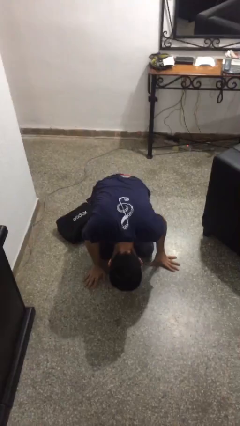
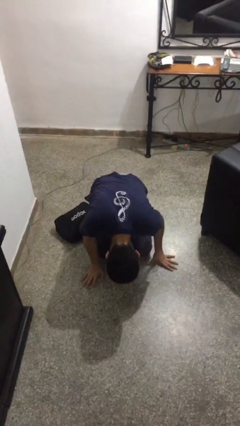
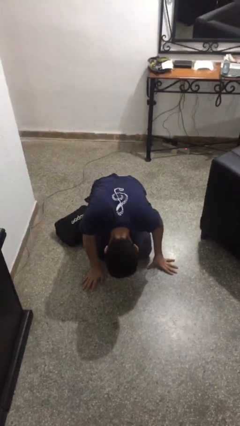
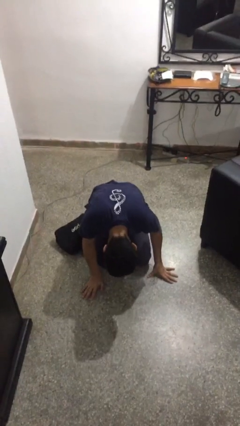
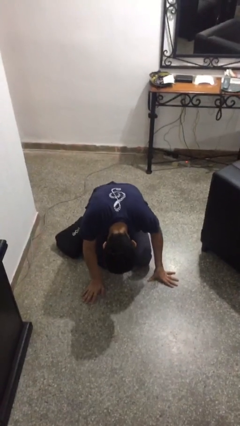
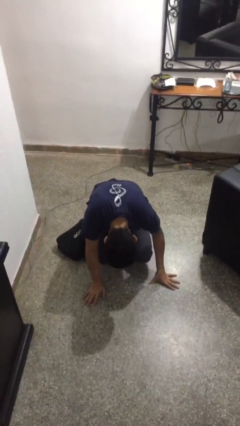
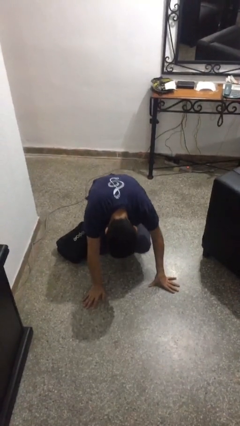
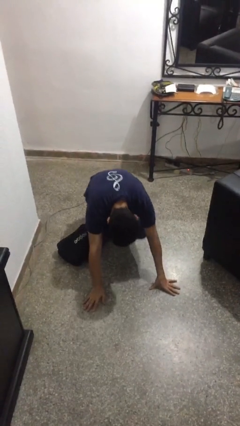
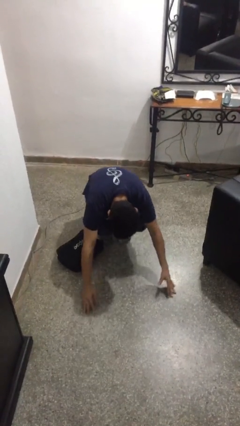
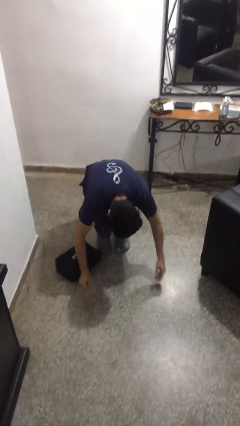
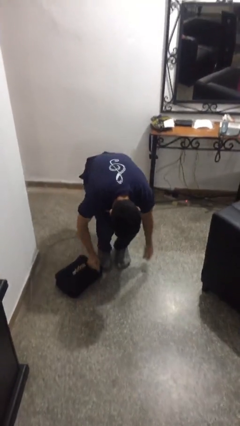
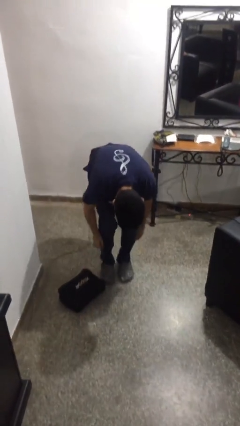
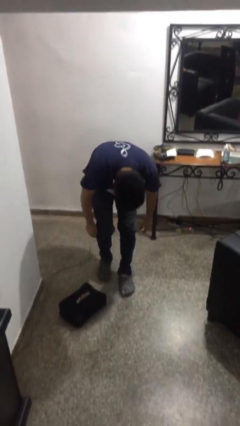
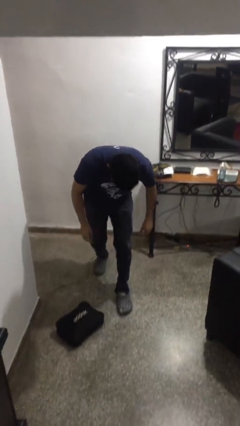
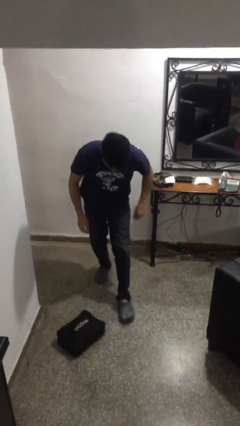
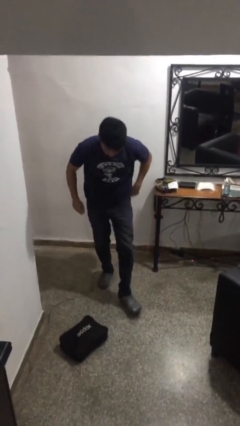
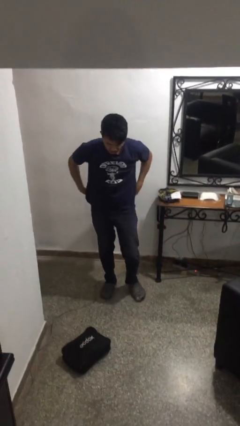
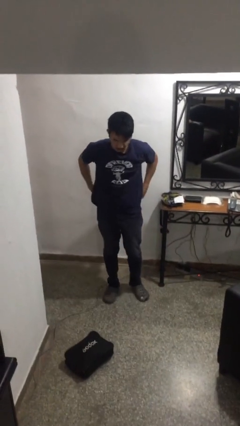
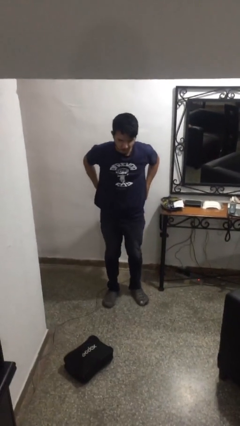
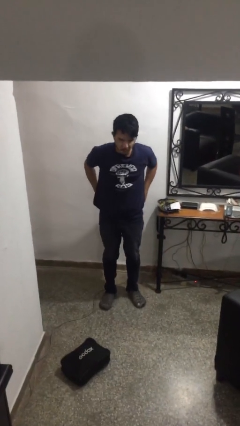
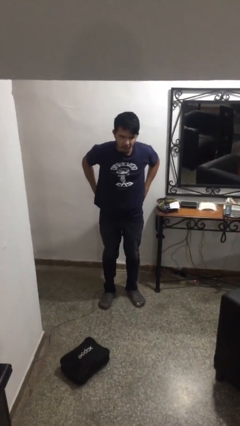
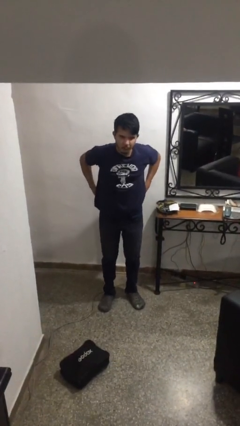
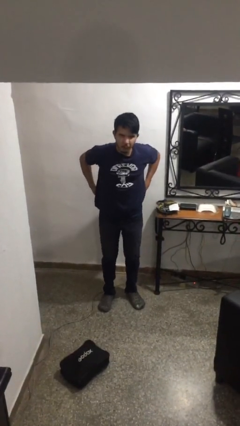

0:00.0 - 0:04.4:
person stands up from floor

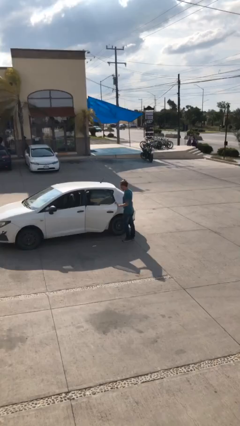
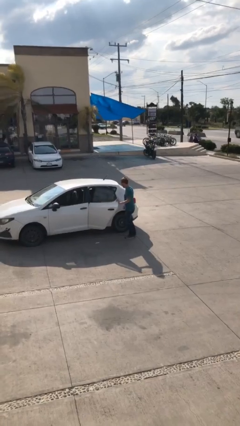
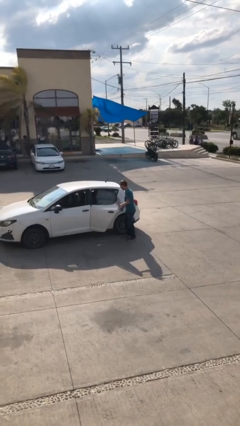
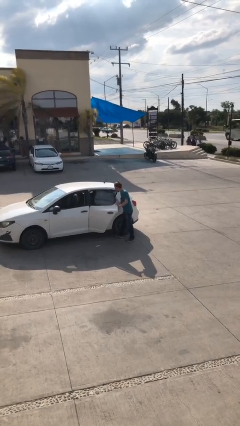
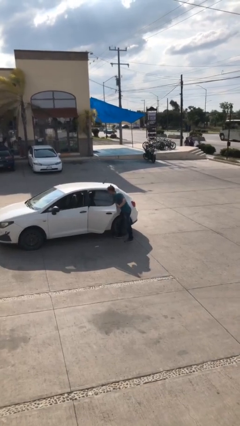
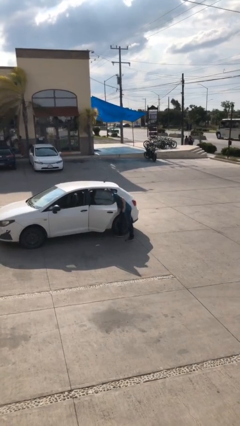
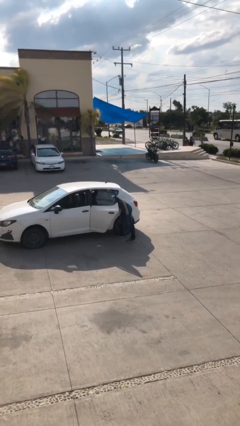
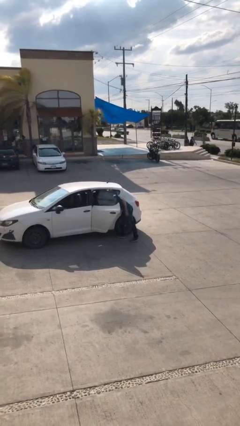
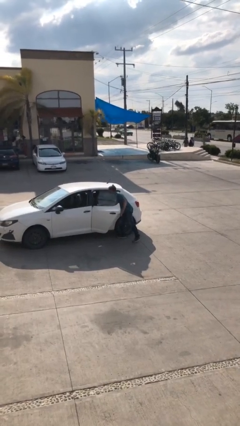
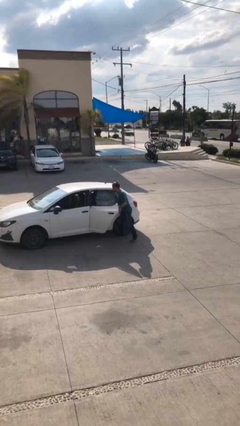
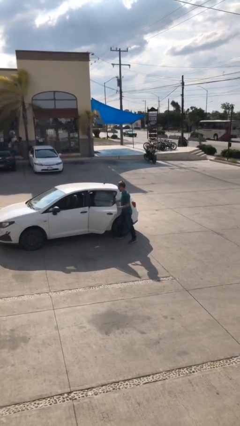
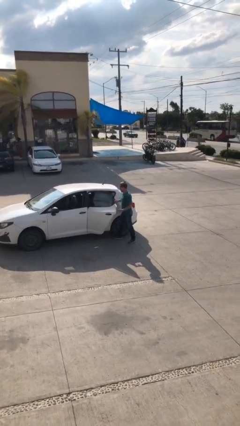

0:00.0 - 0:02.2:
person unloads car

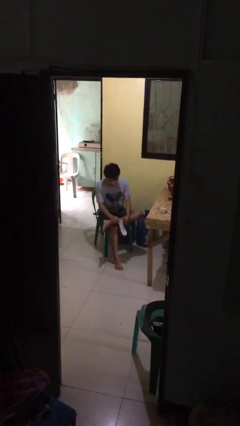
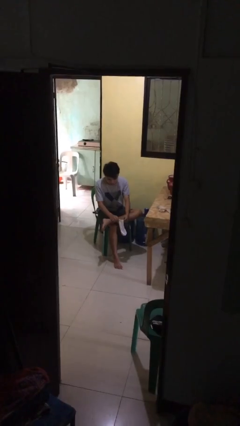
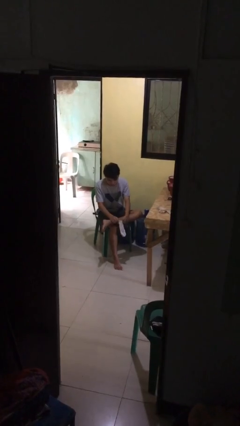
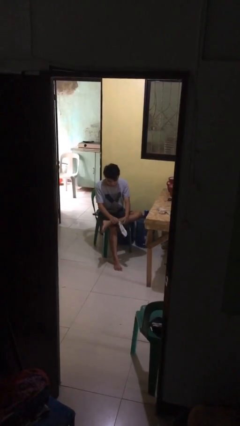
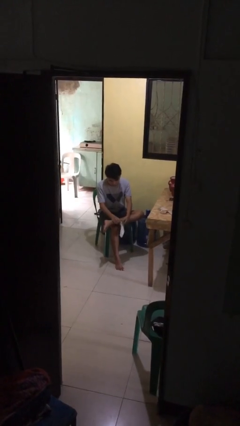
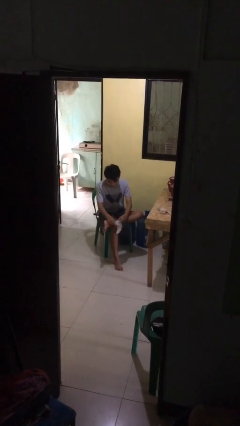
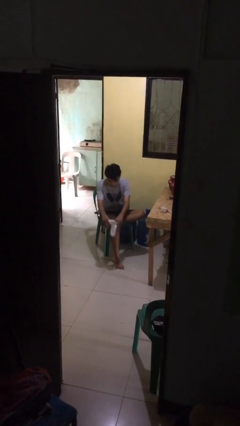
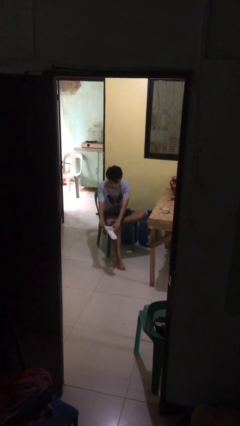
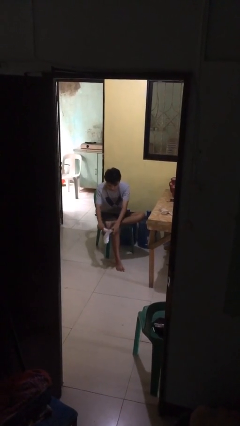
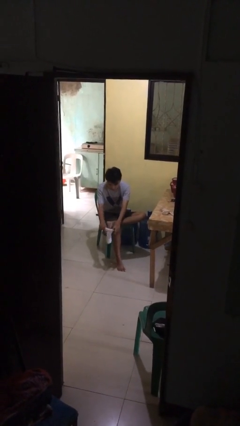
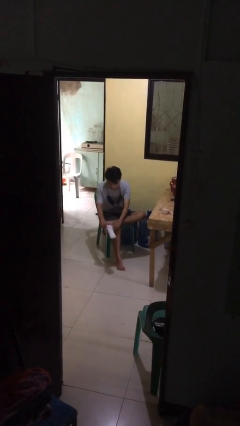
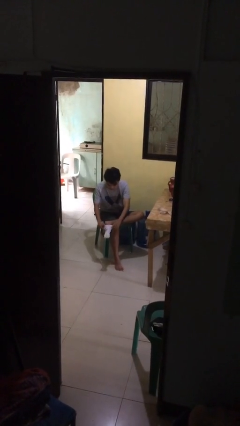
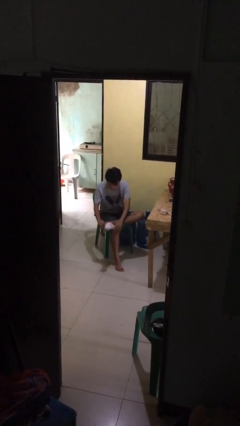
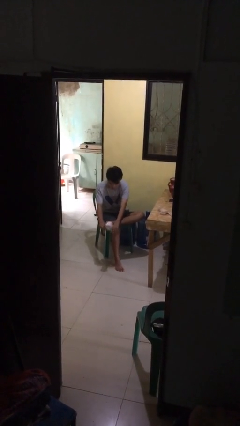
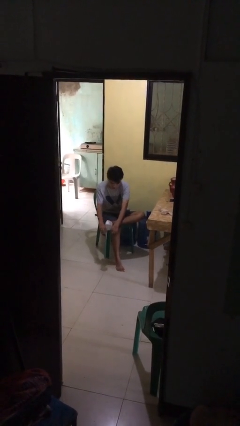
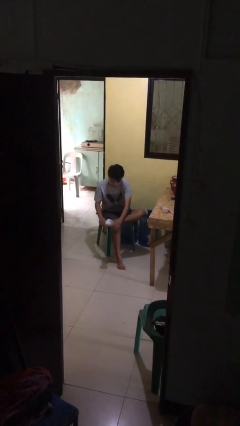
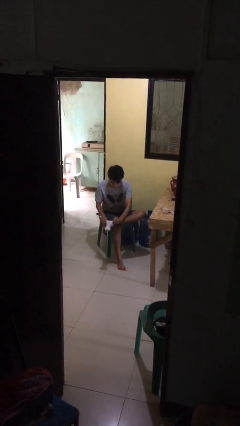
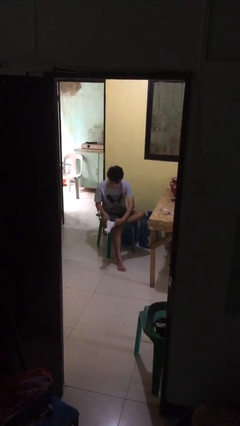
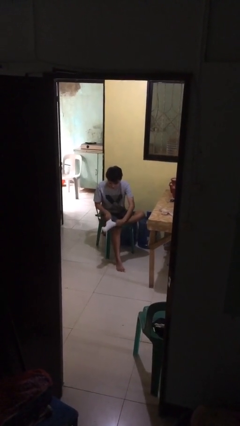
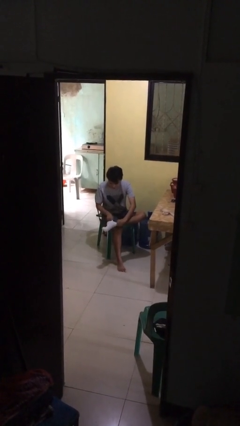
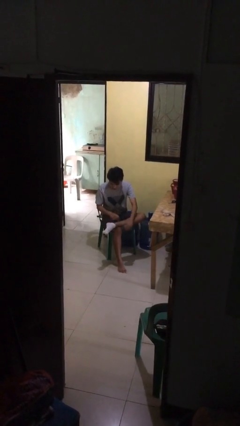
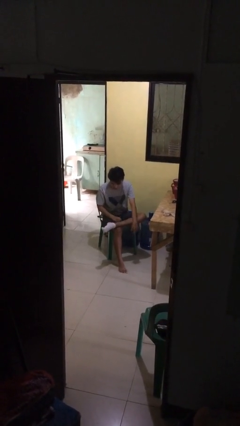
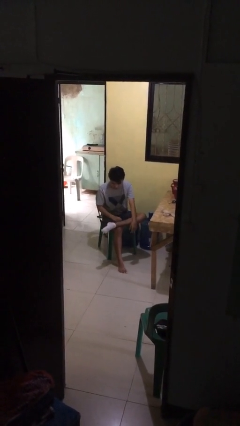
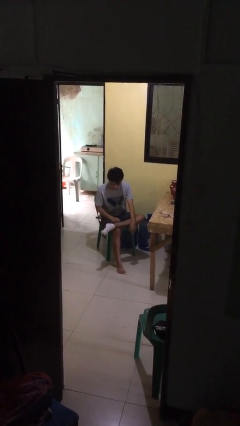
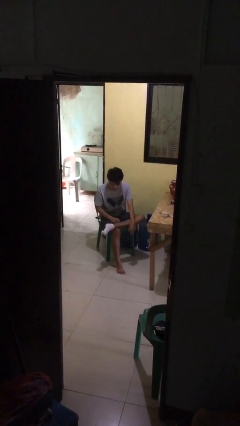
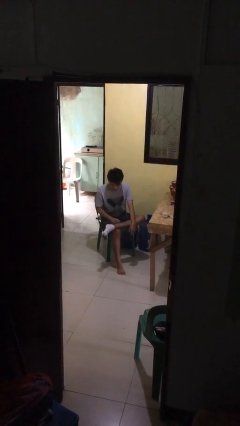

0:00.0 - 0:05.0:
person puts on socks

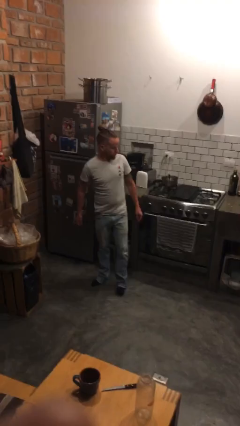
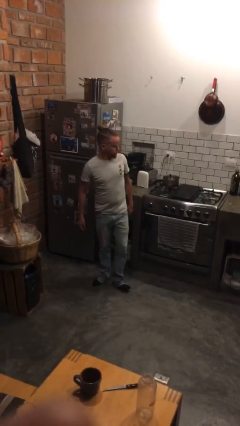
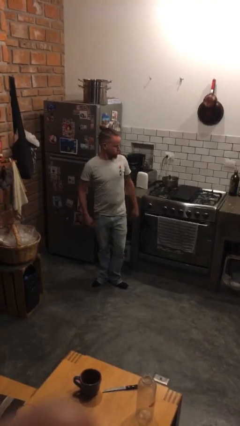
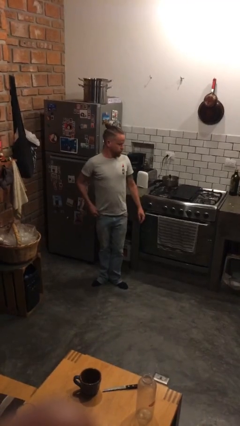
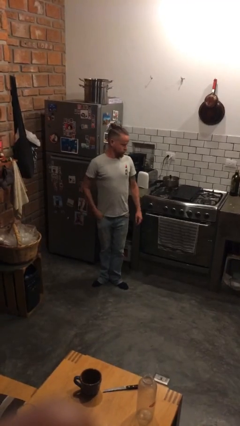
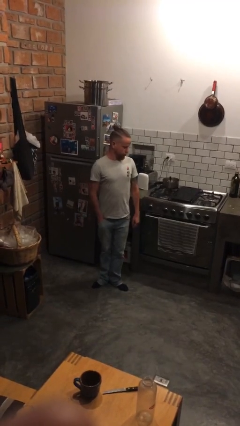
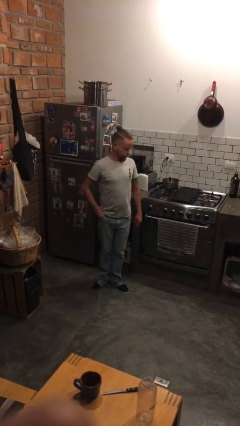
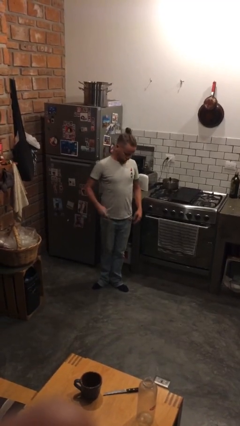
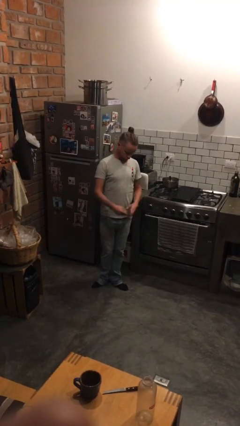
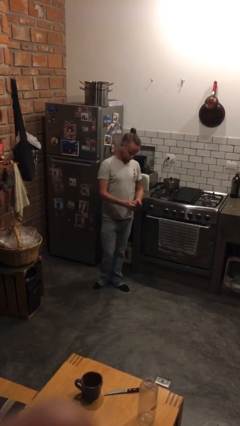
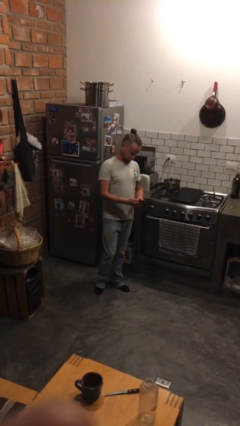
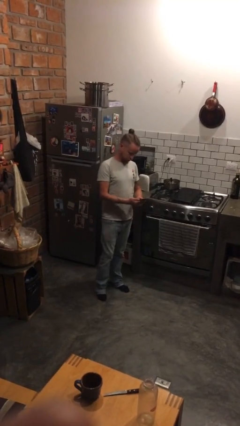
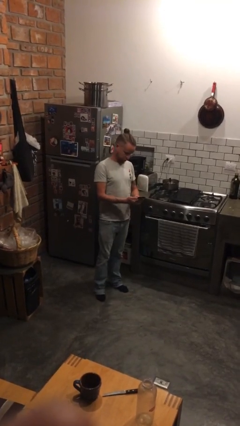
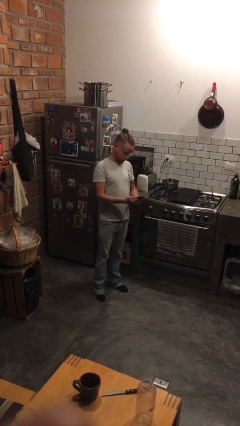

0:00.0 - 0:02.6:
person takes phone from pocket

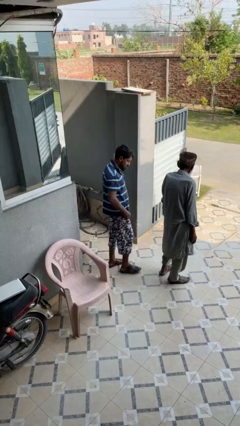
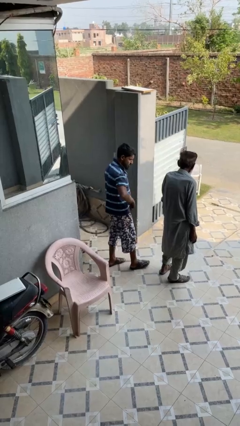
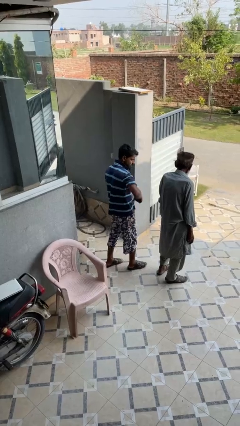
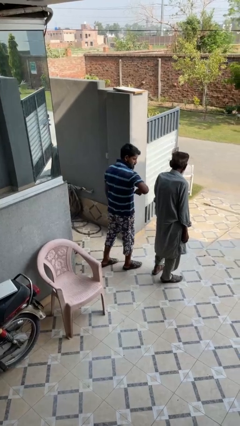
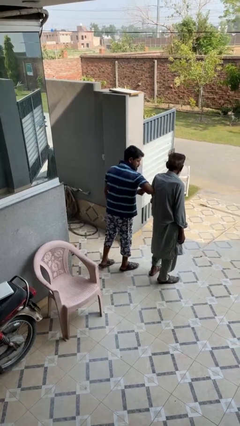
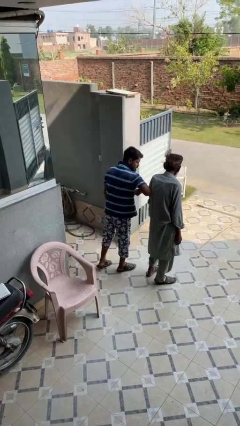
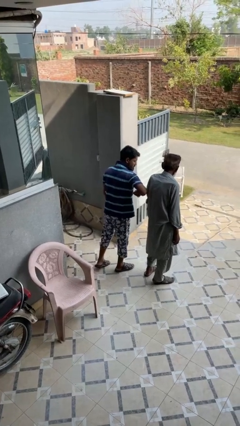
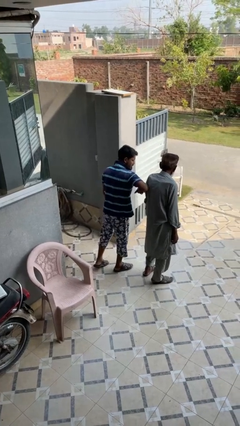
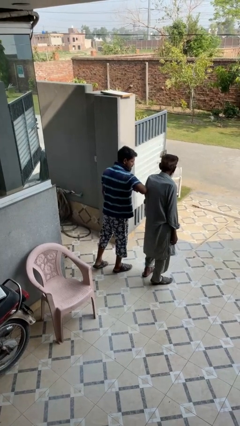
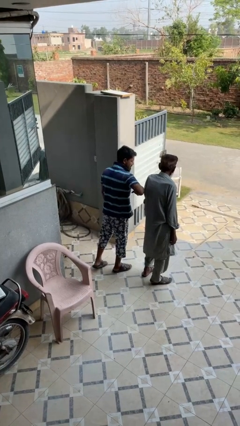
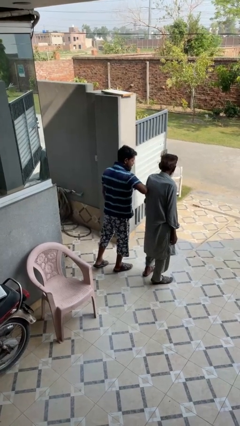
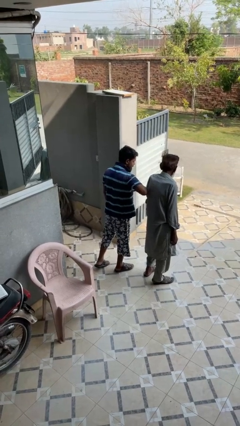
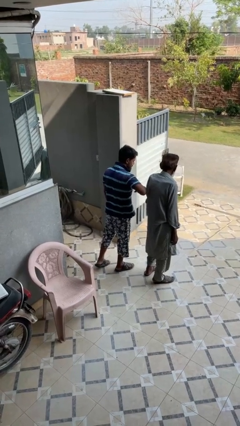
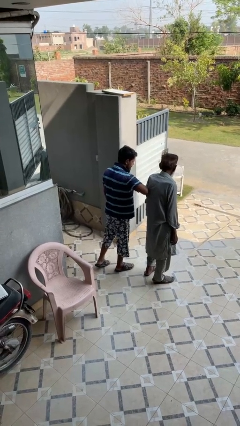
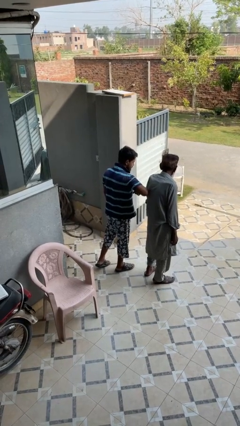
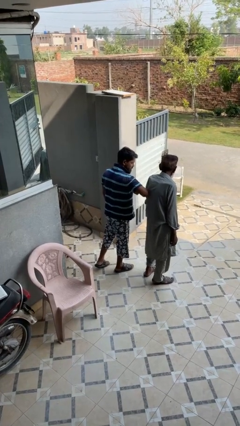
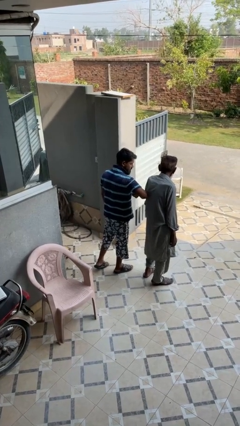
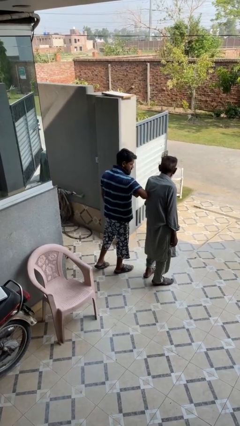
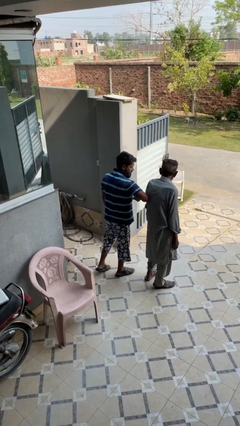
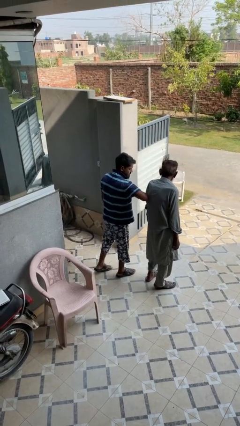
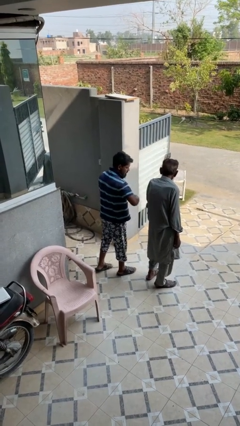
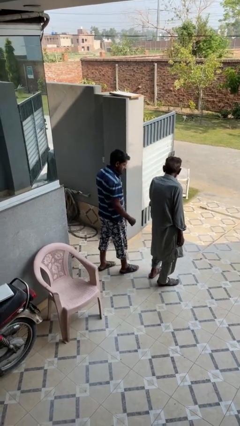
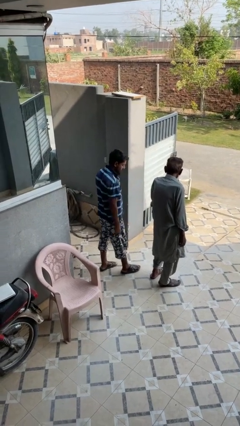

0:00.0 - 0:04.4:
person nudges person with elbow
